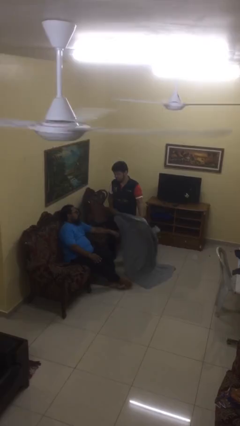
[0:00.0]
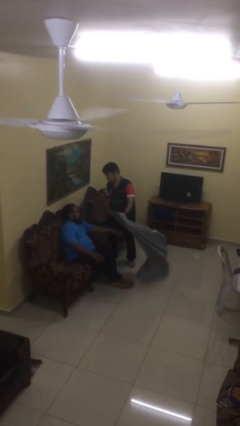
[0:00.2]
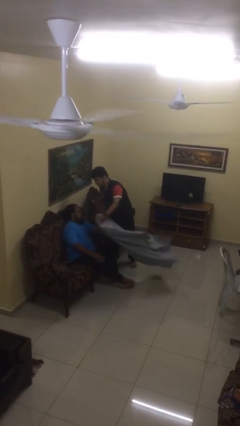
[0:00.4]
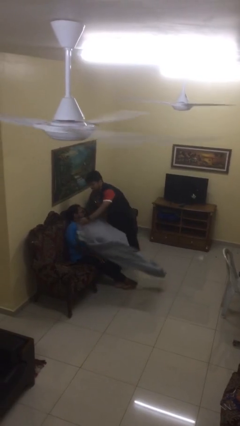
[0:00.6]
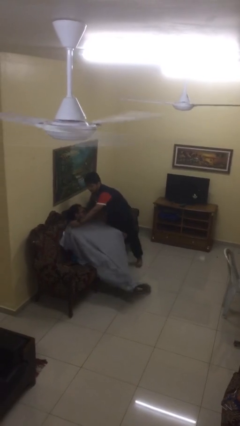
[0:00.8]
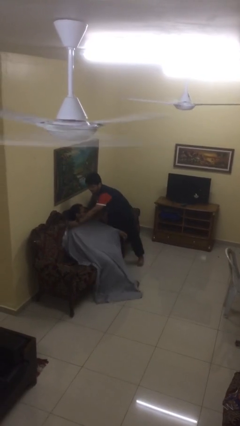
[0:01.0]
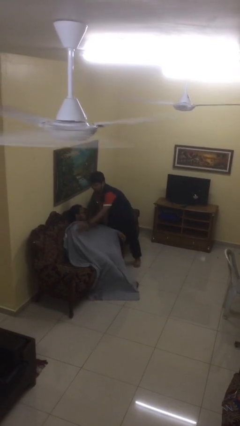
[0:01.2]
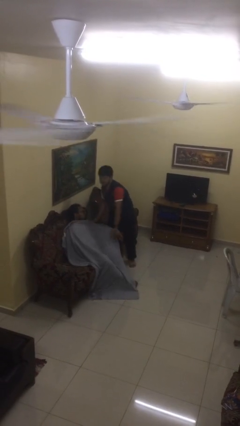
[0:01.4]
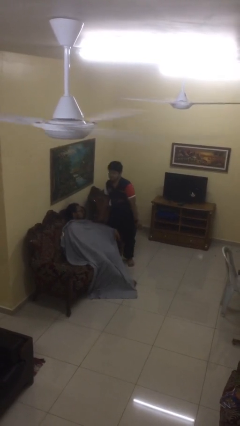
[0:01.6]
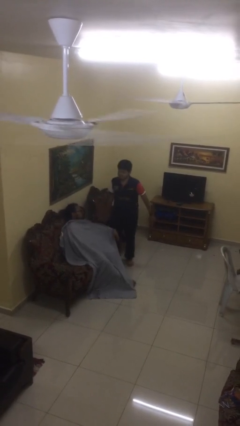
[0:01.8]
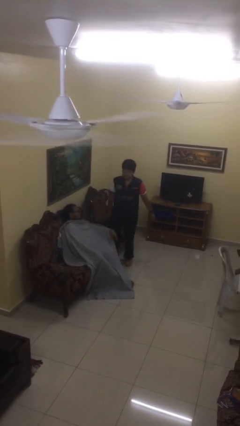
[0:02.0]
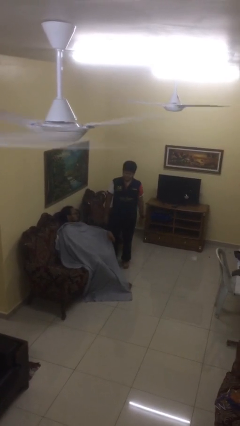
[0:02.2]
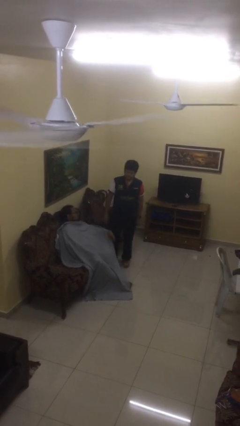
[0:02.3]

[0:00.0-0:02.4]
person covers friend with blanket

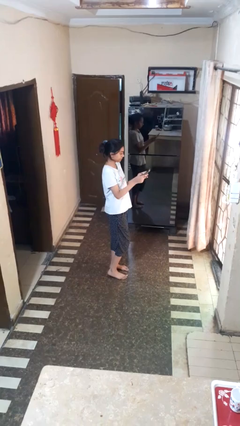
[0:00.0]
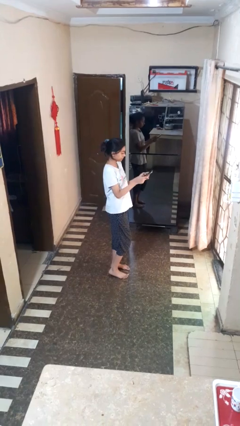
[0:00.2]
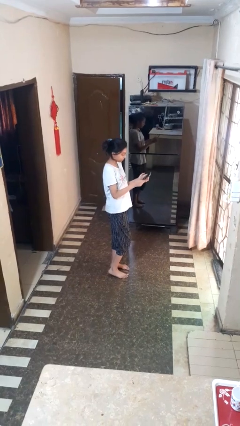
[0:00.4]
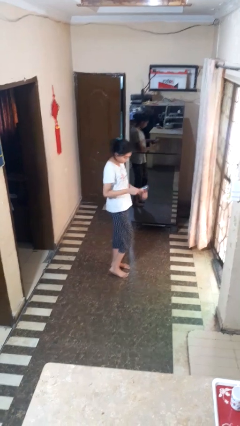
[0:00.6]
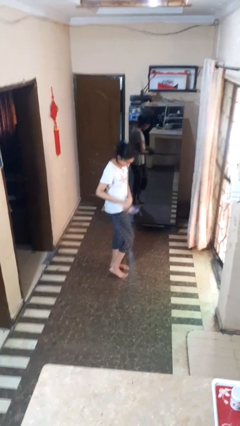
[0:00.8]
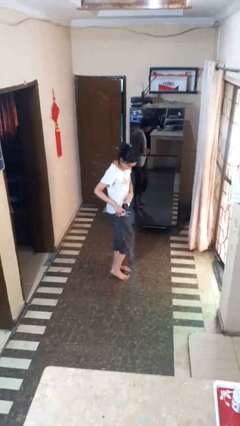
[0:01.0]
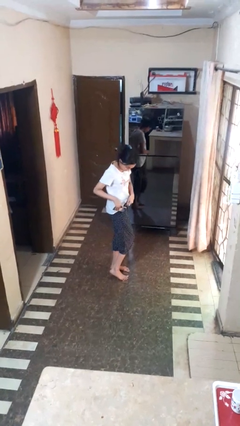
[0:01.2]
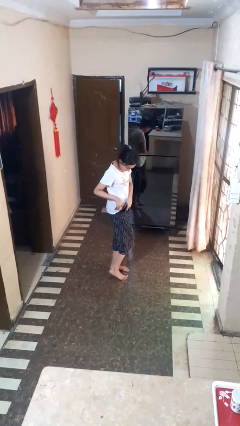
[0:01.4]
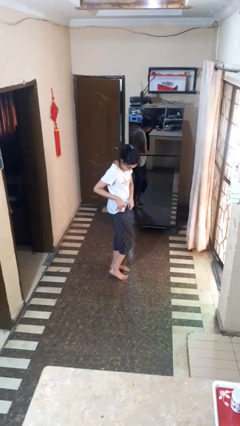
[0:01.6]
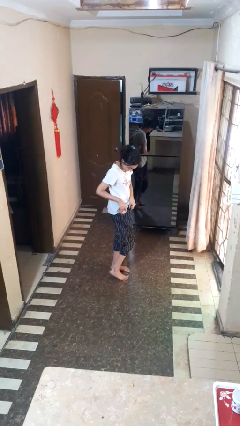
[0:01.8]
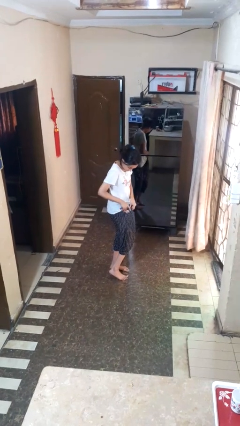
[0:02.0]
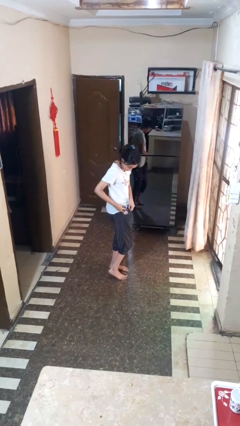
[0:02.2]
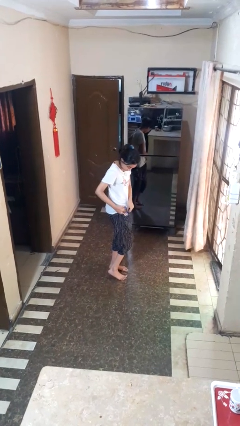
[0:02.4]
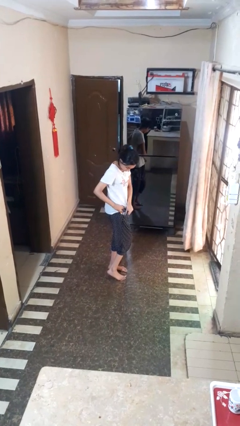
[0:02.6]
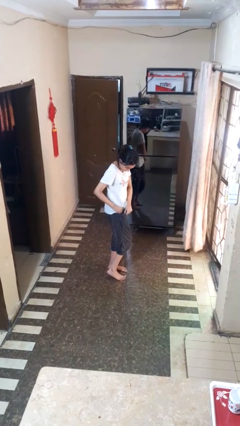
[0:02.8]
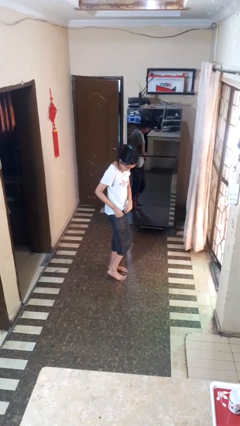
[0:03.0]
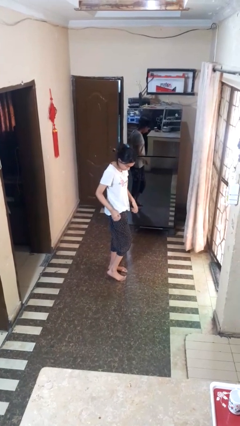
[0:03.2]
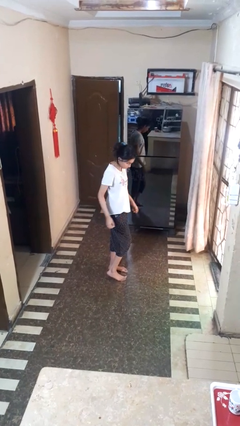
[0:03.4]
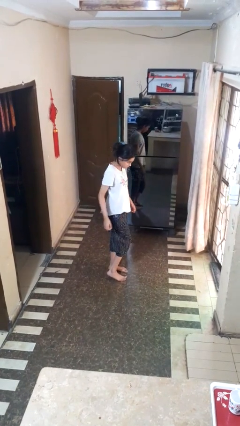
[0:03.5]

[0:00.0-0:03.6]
person puts phone into pocket

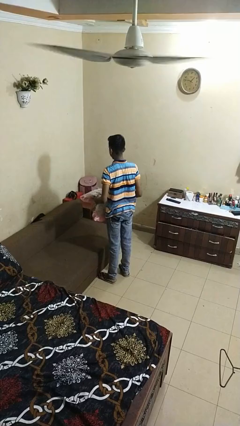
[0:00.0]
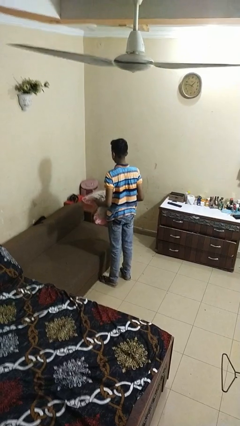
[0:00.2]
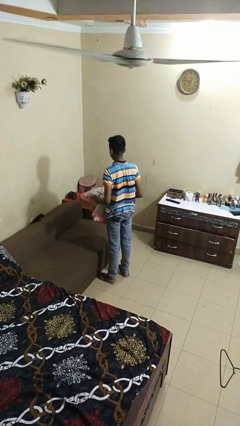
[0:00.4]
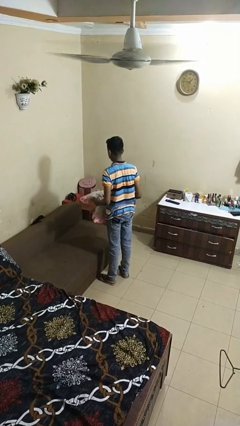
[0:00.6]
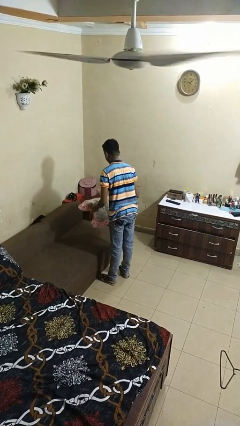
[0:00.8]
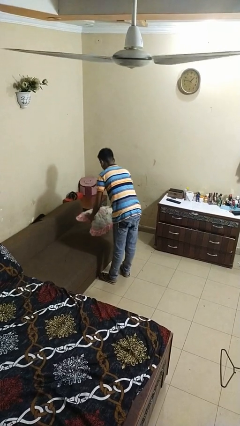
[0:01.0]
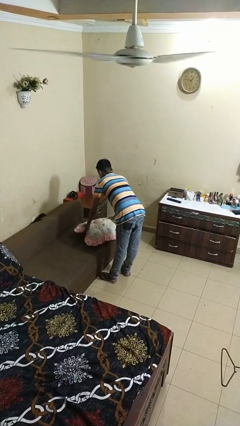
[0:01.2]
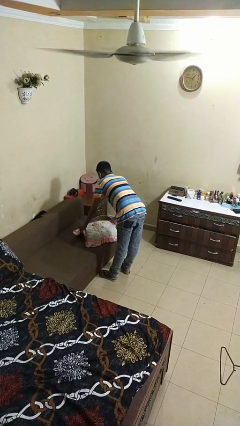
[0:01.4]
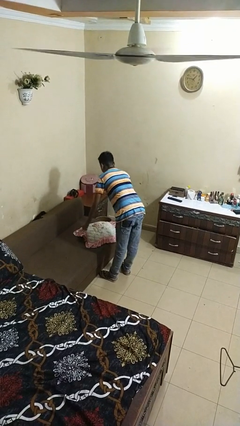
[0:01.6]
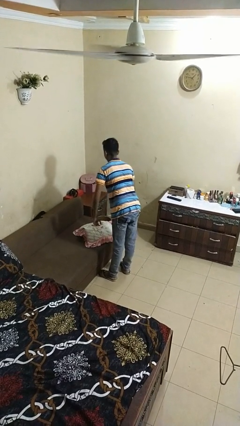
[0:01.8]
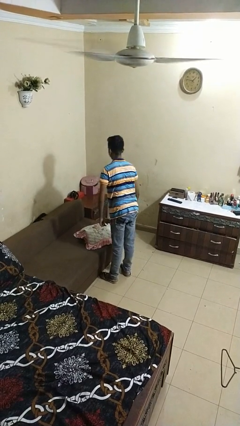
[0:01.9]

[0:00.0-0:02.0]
person puts down object on couch

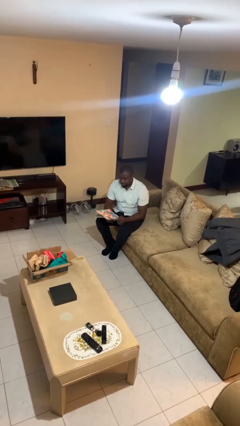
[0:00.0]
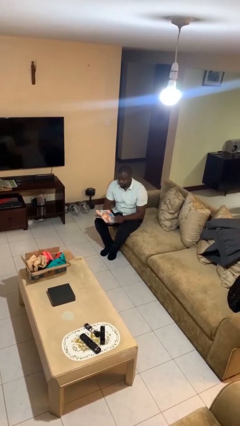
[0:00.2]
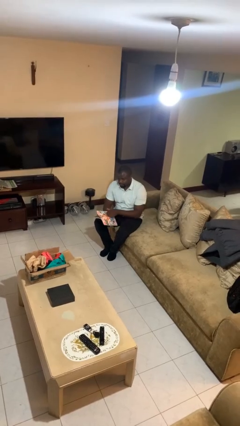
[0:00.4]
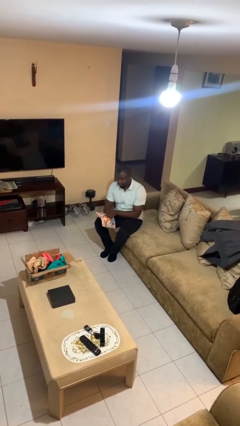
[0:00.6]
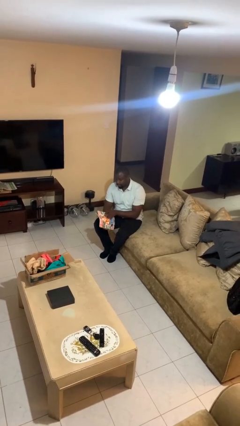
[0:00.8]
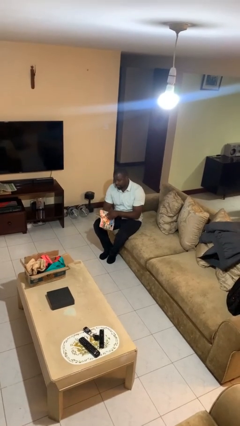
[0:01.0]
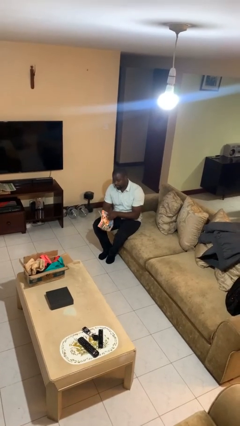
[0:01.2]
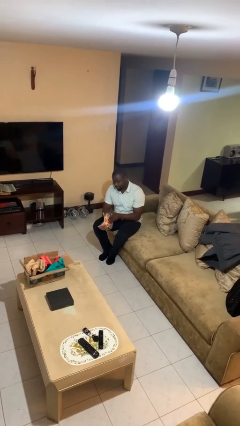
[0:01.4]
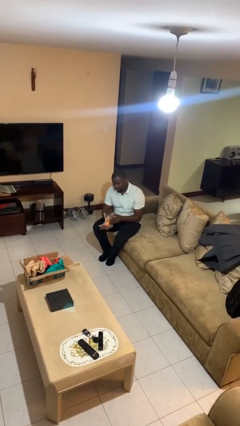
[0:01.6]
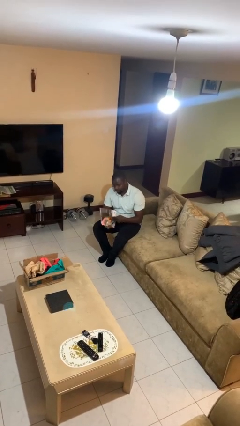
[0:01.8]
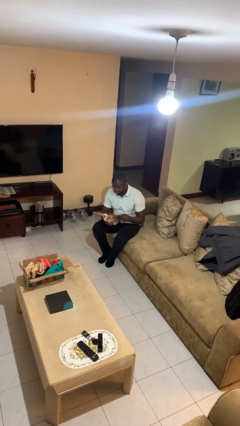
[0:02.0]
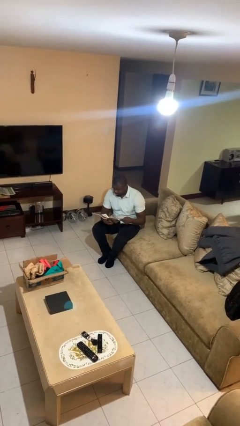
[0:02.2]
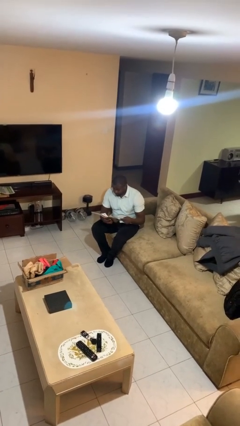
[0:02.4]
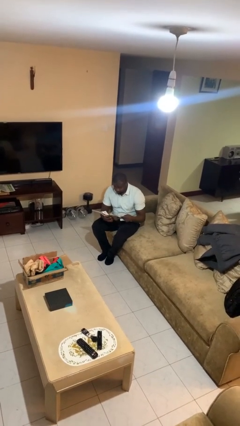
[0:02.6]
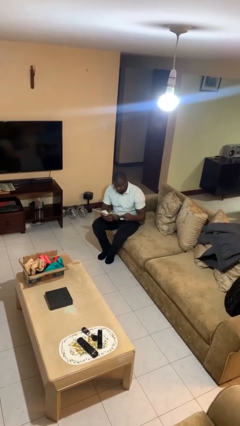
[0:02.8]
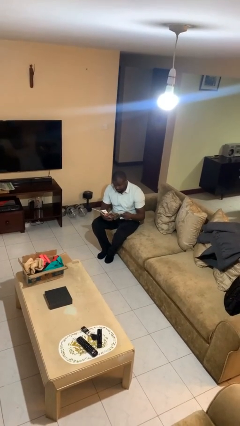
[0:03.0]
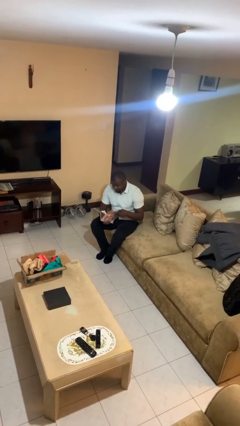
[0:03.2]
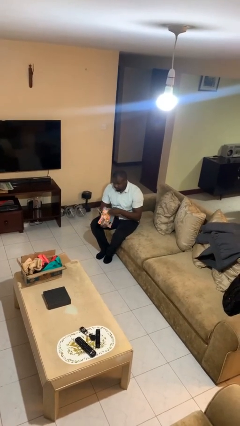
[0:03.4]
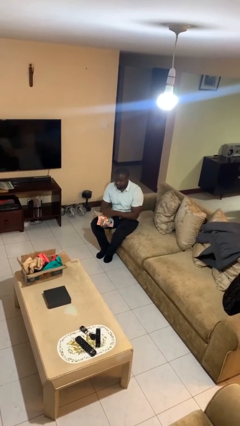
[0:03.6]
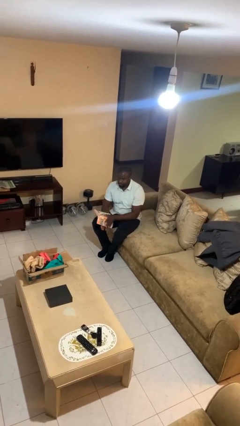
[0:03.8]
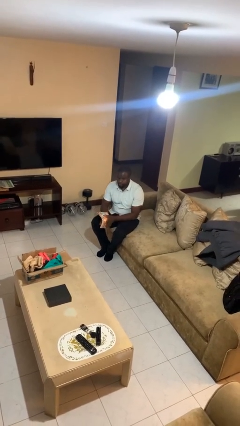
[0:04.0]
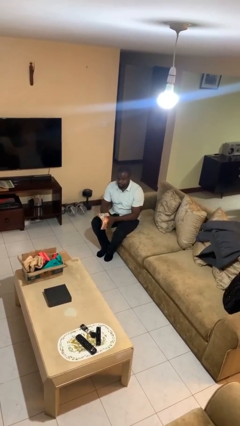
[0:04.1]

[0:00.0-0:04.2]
person reads magazine

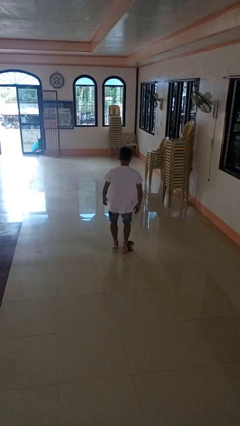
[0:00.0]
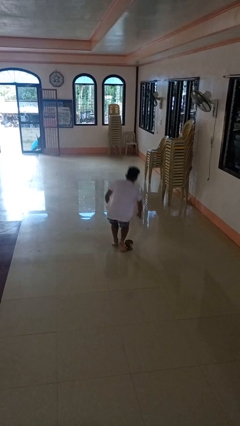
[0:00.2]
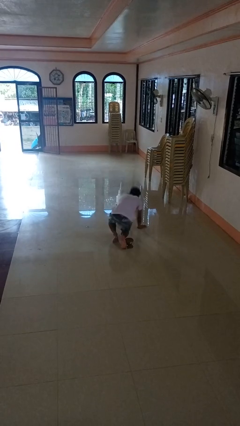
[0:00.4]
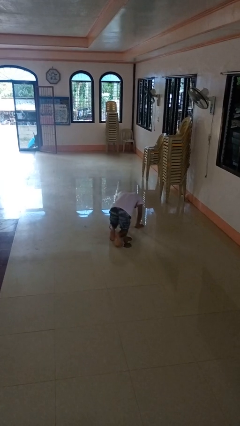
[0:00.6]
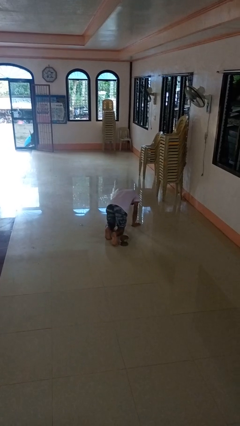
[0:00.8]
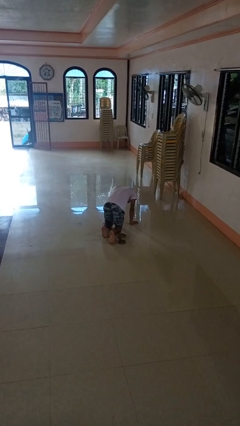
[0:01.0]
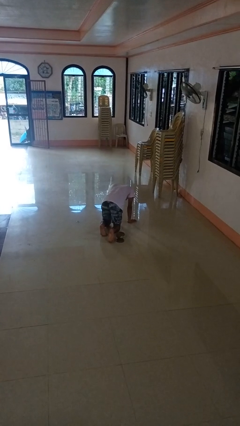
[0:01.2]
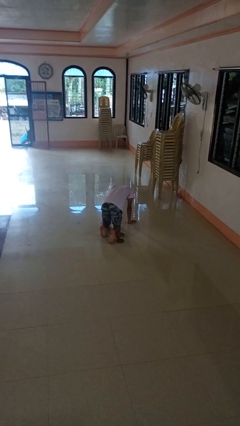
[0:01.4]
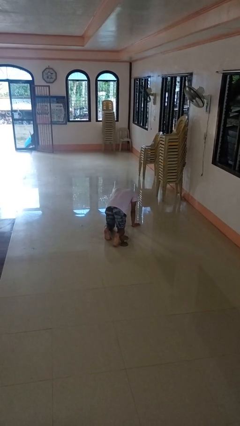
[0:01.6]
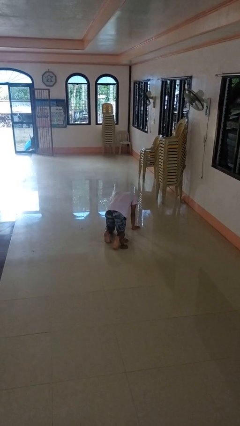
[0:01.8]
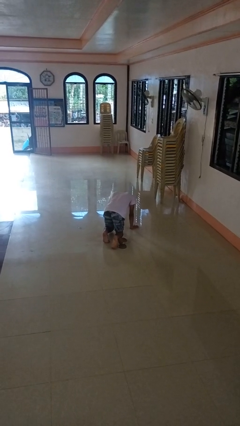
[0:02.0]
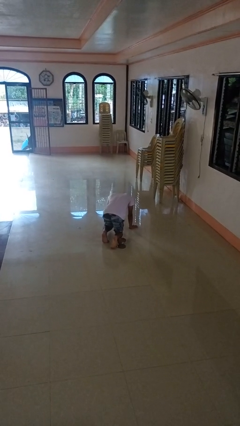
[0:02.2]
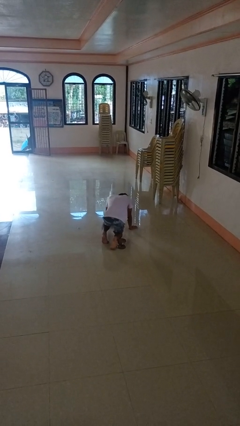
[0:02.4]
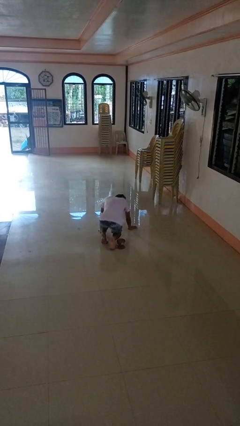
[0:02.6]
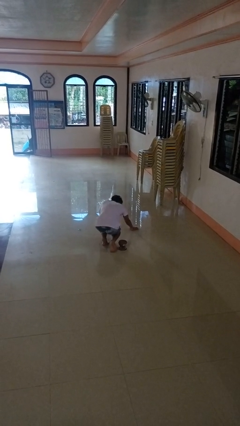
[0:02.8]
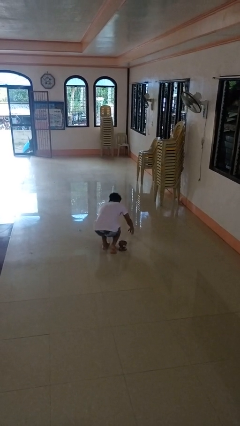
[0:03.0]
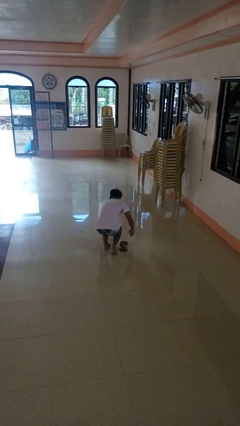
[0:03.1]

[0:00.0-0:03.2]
person trips on object on floor

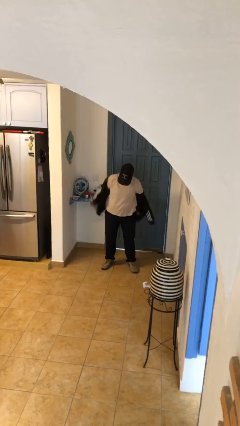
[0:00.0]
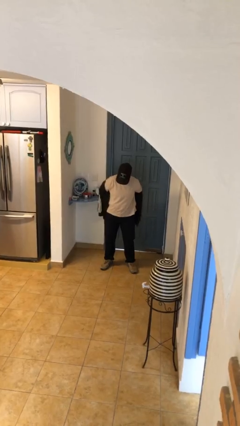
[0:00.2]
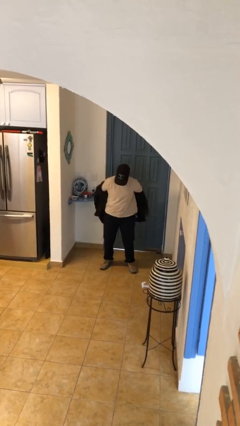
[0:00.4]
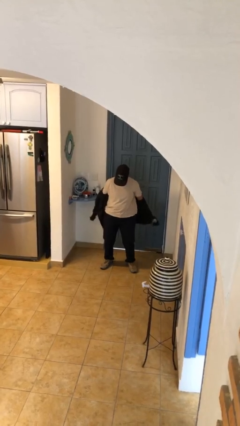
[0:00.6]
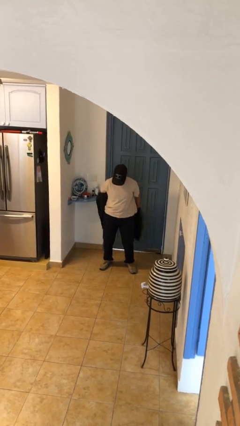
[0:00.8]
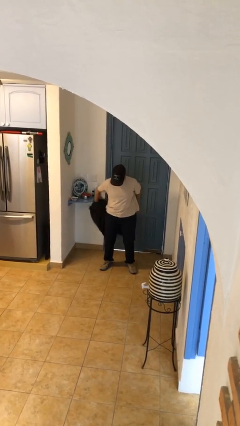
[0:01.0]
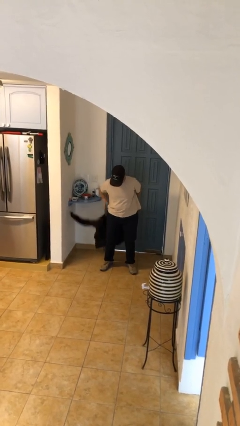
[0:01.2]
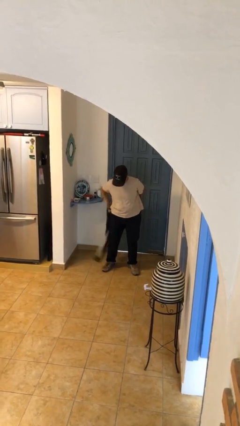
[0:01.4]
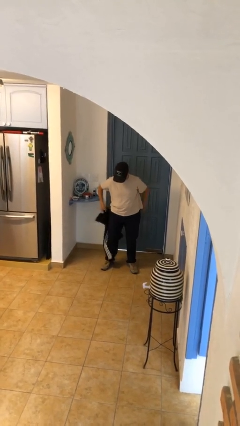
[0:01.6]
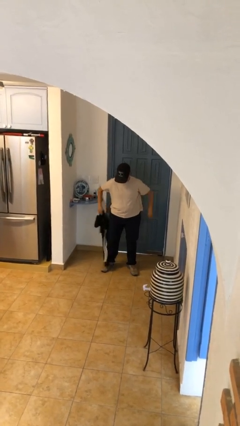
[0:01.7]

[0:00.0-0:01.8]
person takes off jacket

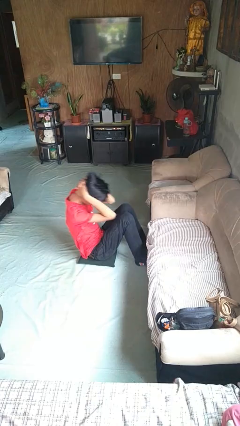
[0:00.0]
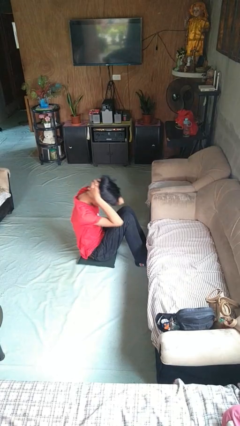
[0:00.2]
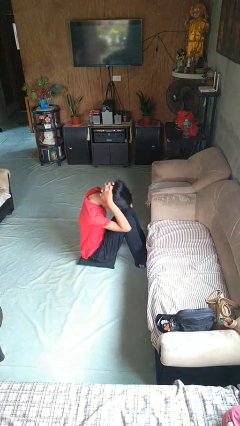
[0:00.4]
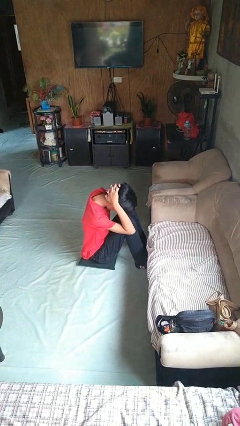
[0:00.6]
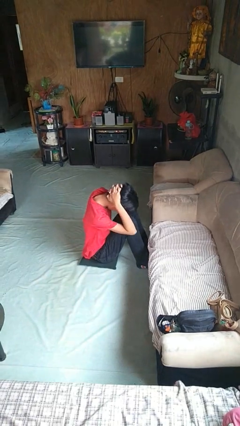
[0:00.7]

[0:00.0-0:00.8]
person exercises with situp
